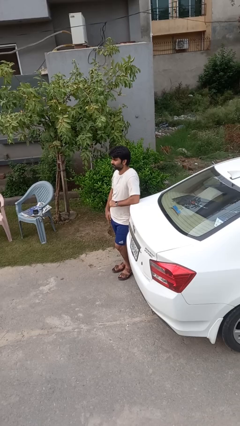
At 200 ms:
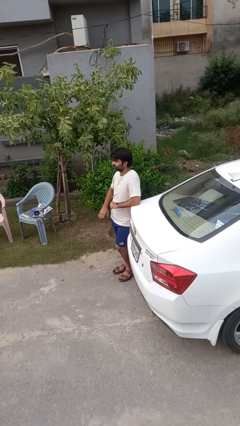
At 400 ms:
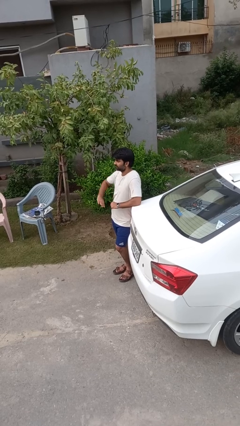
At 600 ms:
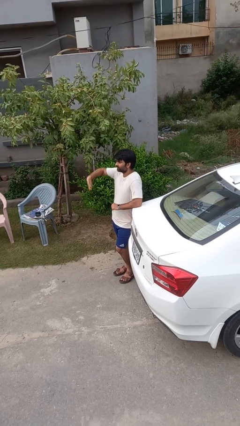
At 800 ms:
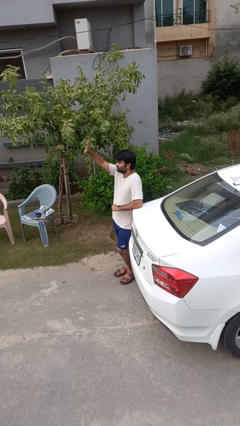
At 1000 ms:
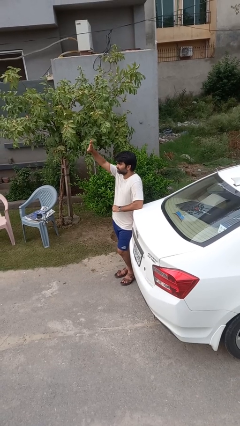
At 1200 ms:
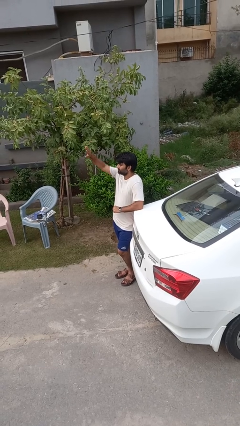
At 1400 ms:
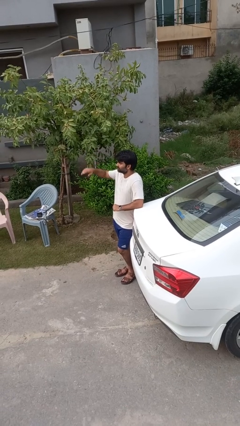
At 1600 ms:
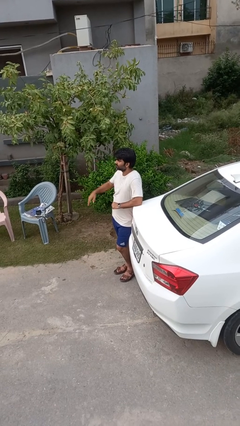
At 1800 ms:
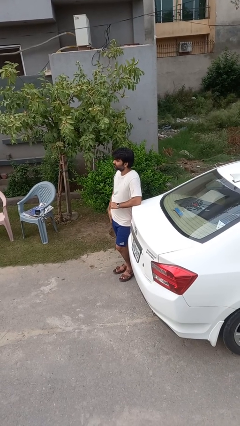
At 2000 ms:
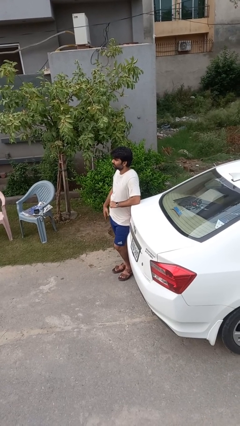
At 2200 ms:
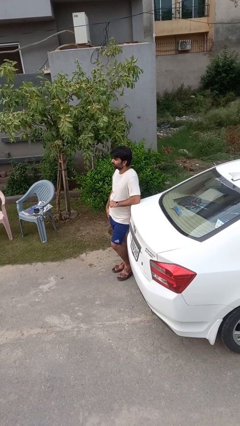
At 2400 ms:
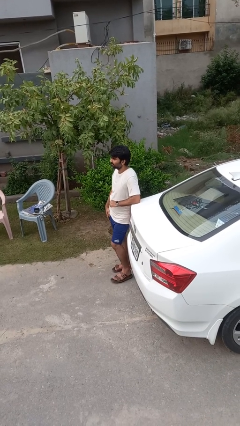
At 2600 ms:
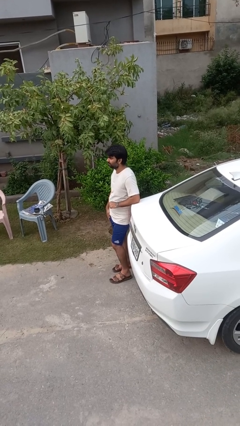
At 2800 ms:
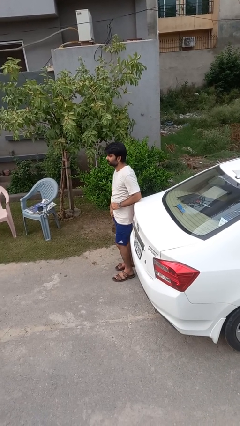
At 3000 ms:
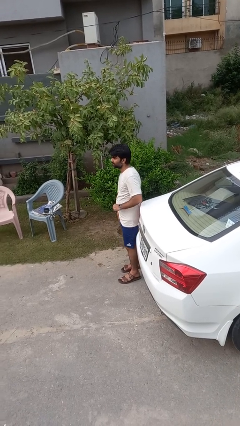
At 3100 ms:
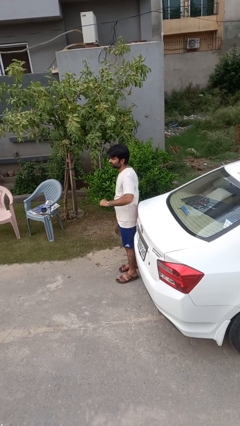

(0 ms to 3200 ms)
person gestures swipe up

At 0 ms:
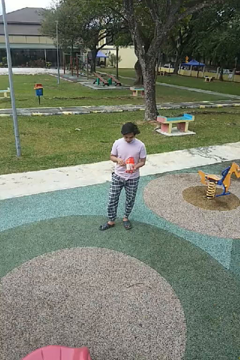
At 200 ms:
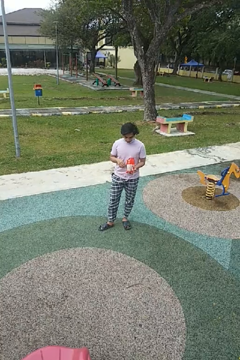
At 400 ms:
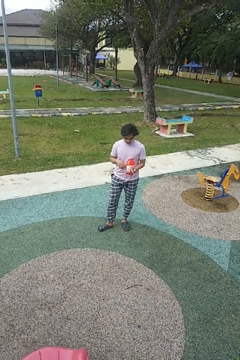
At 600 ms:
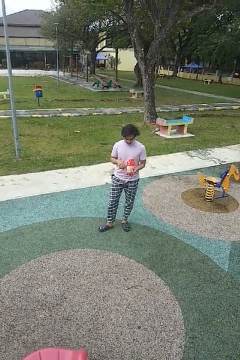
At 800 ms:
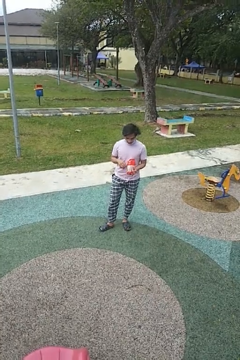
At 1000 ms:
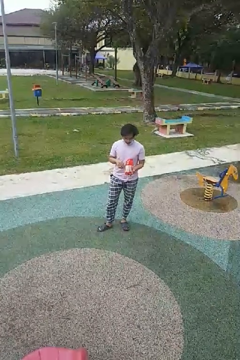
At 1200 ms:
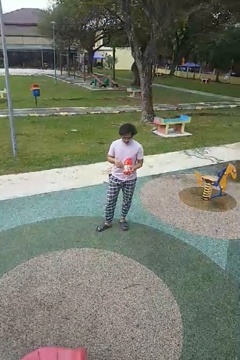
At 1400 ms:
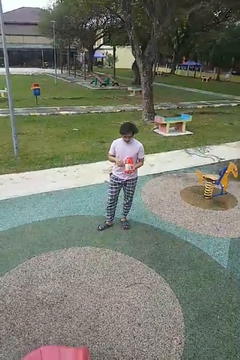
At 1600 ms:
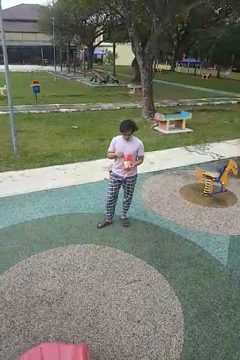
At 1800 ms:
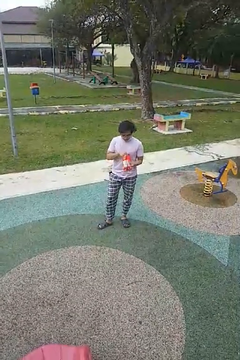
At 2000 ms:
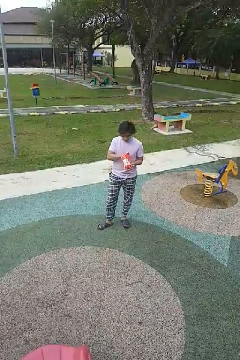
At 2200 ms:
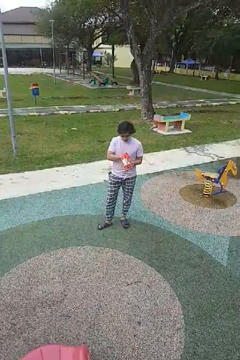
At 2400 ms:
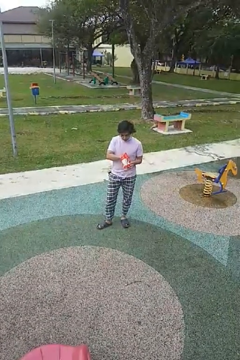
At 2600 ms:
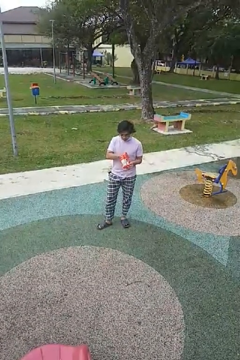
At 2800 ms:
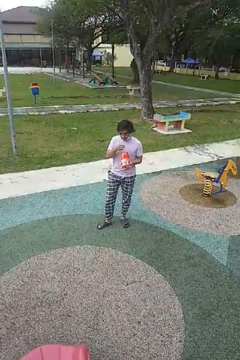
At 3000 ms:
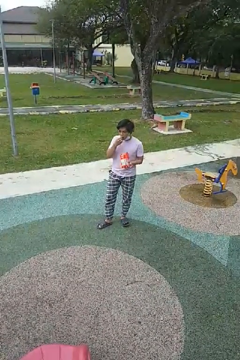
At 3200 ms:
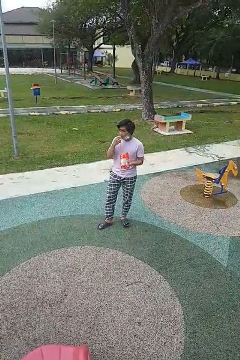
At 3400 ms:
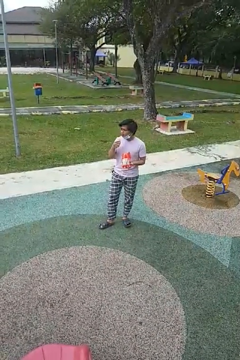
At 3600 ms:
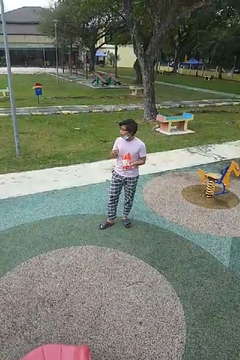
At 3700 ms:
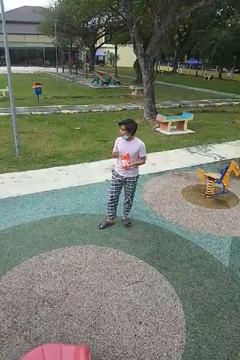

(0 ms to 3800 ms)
person eats snack from bag

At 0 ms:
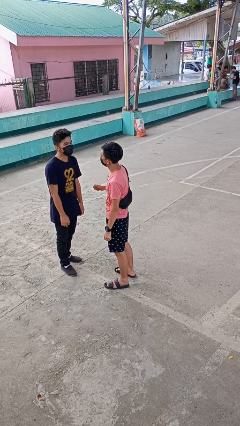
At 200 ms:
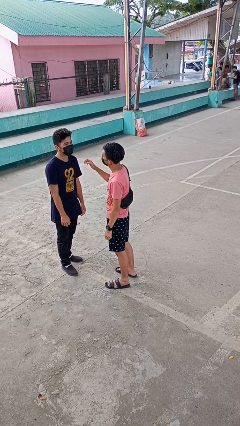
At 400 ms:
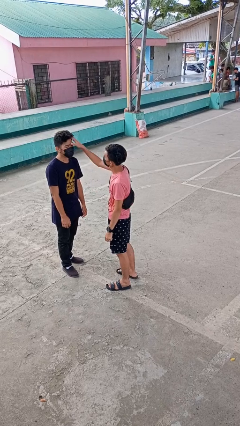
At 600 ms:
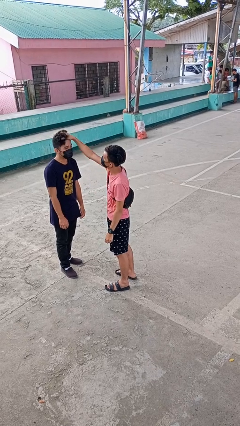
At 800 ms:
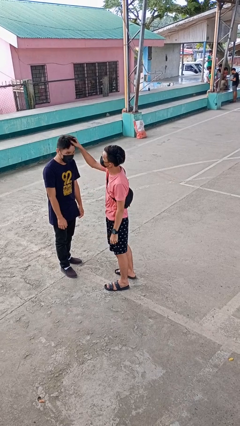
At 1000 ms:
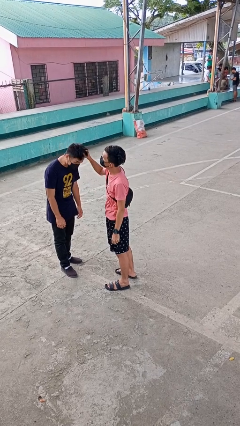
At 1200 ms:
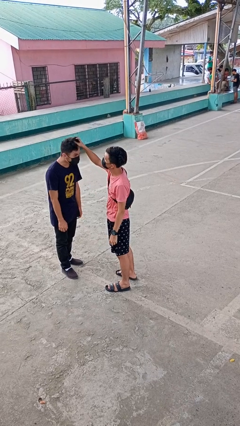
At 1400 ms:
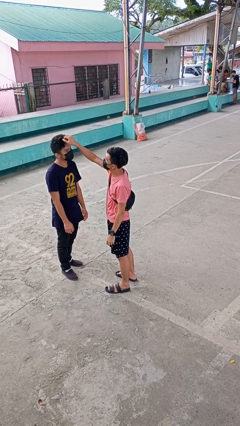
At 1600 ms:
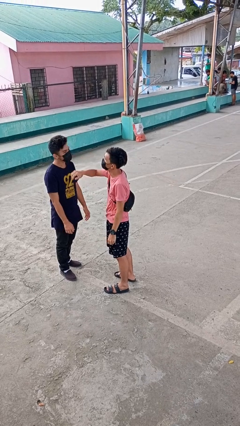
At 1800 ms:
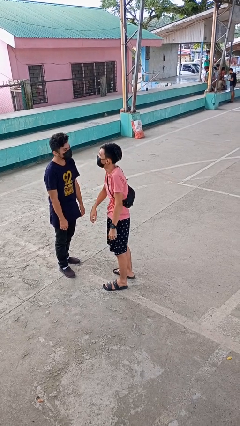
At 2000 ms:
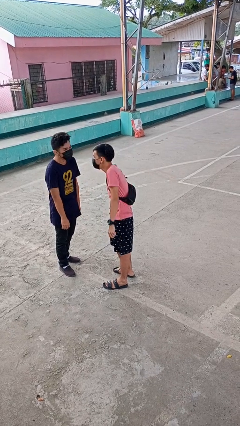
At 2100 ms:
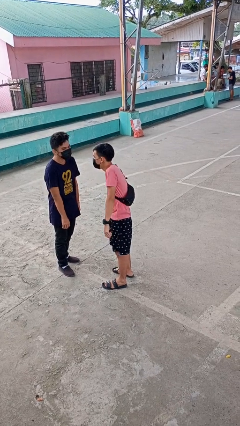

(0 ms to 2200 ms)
person grabs person by hair

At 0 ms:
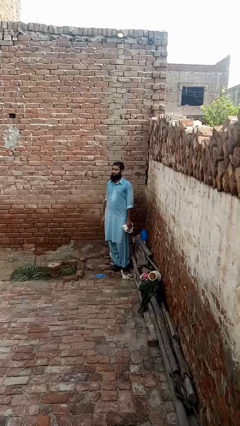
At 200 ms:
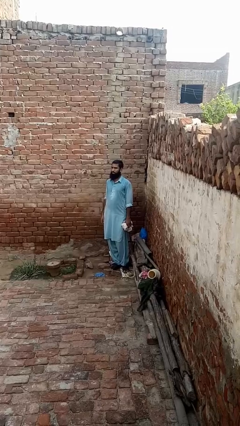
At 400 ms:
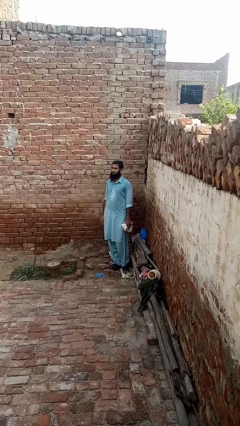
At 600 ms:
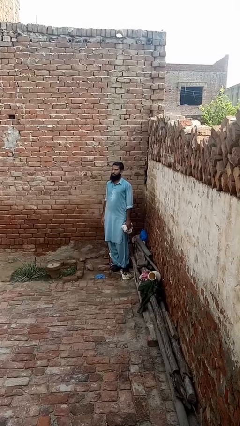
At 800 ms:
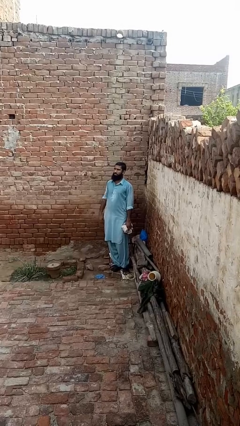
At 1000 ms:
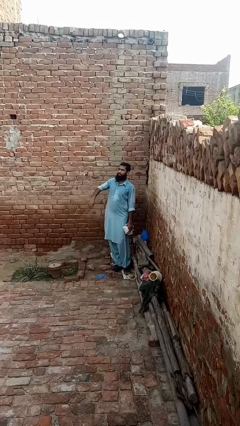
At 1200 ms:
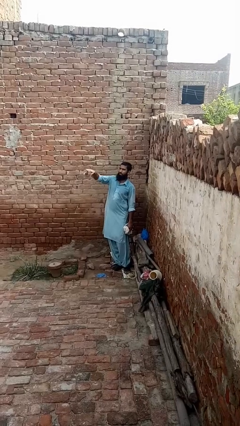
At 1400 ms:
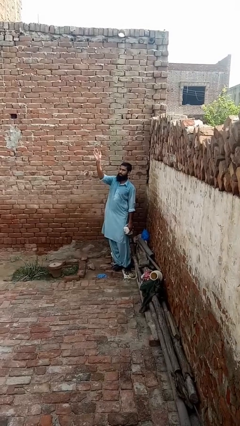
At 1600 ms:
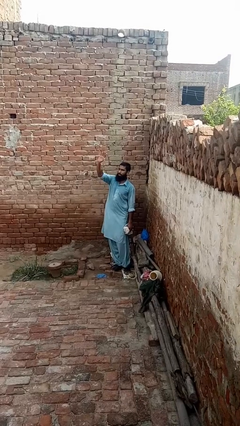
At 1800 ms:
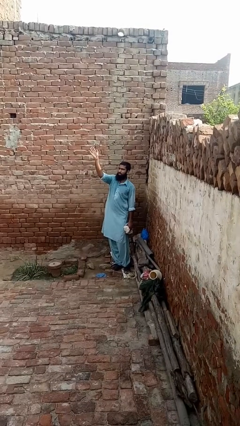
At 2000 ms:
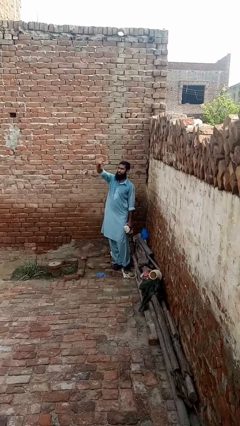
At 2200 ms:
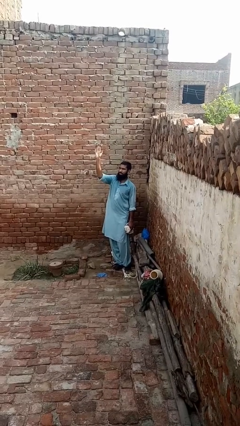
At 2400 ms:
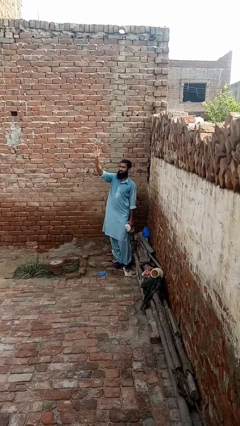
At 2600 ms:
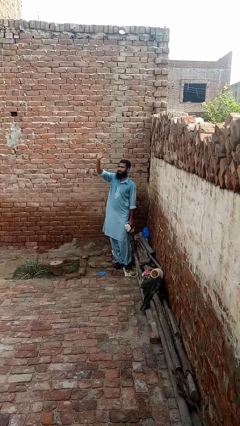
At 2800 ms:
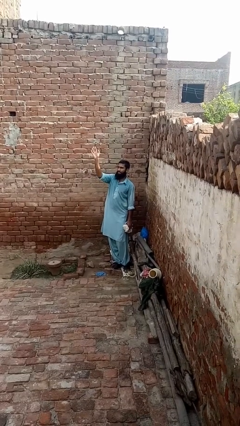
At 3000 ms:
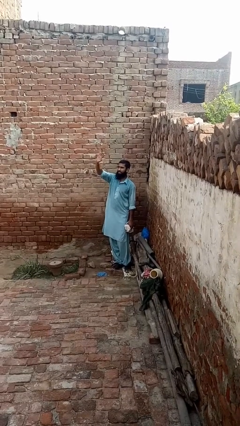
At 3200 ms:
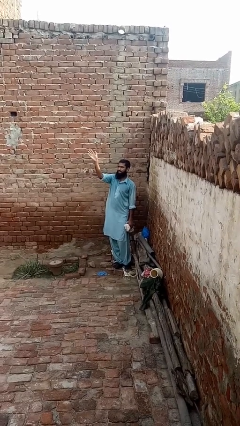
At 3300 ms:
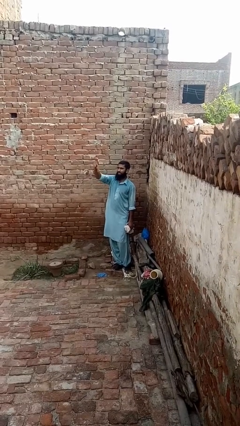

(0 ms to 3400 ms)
person waves at person

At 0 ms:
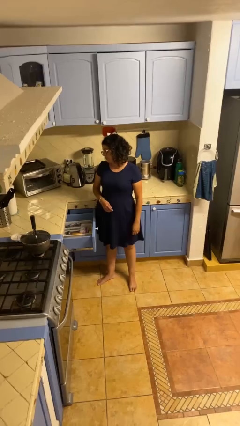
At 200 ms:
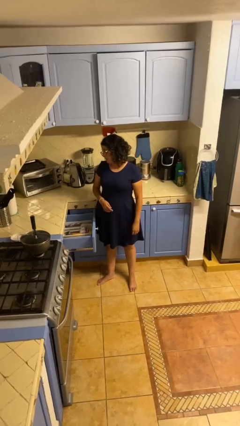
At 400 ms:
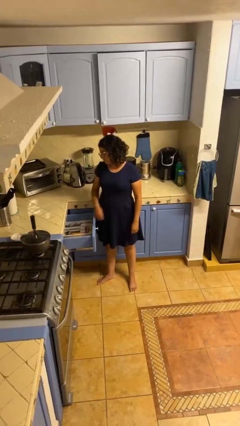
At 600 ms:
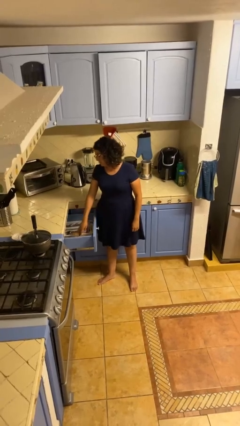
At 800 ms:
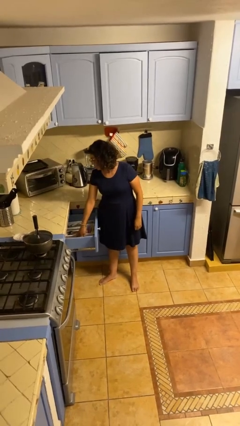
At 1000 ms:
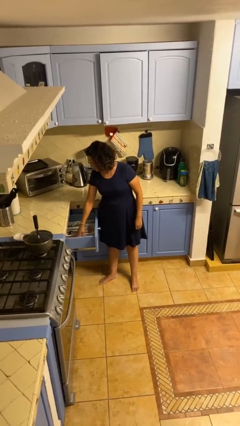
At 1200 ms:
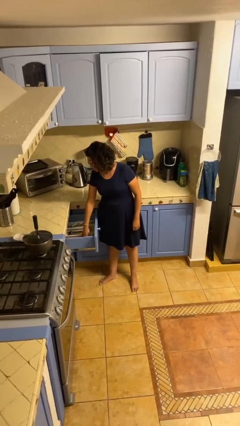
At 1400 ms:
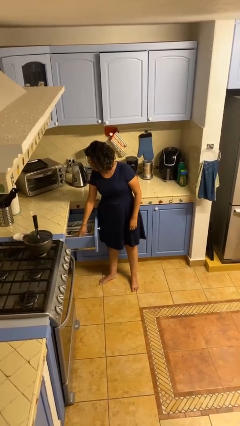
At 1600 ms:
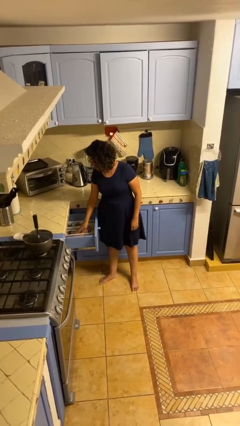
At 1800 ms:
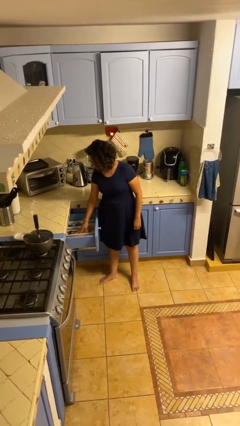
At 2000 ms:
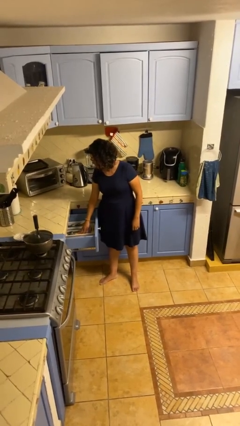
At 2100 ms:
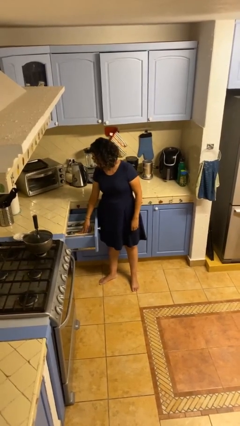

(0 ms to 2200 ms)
person searches in kitchen drawer

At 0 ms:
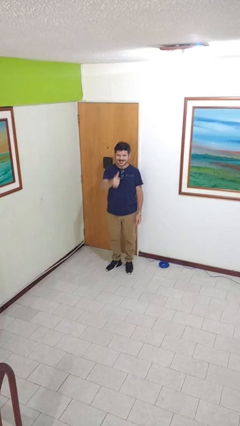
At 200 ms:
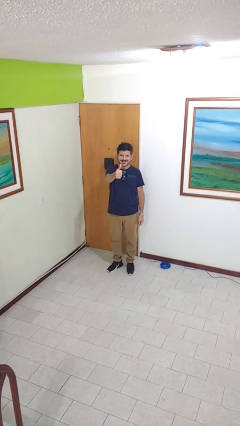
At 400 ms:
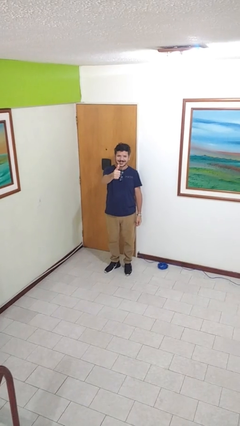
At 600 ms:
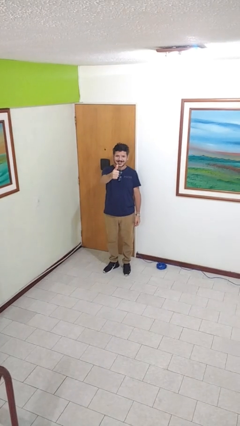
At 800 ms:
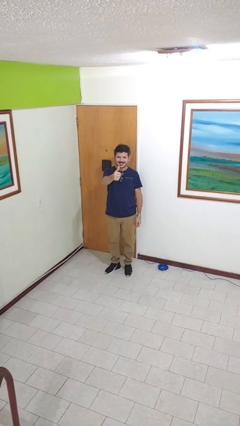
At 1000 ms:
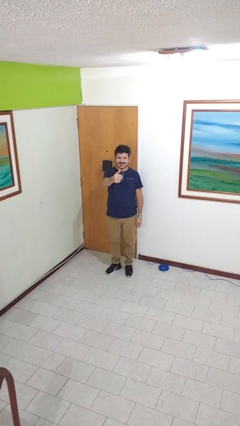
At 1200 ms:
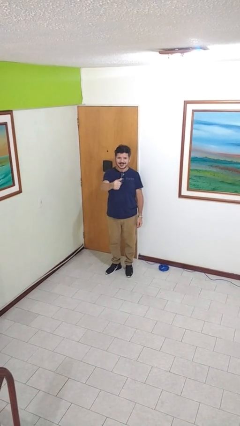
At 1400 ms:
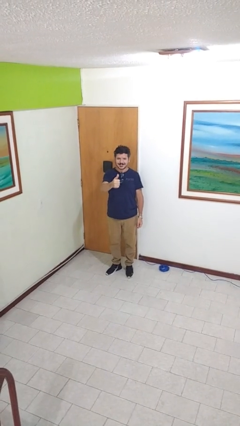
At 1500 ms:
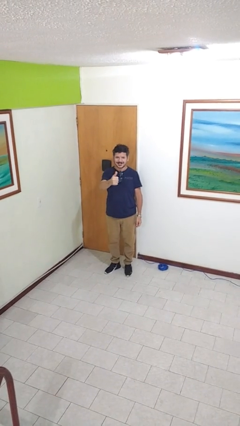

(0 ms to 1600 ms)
person gestures thumbs up

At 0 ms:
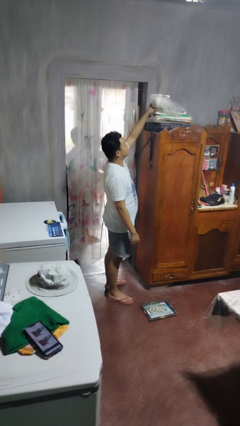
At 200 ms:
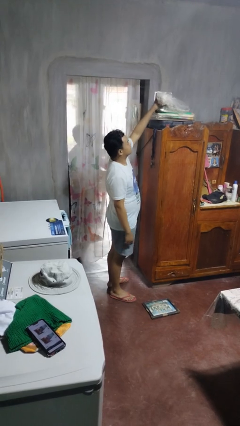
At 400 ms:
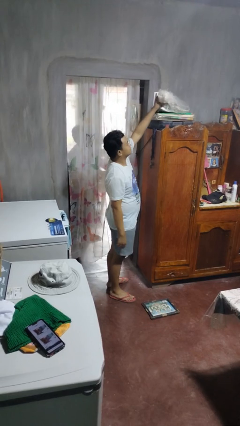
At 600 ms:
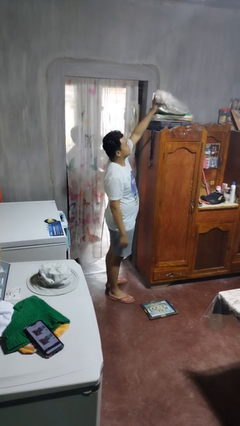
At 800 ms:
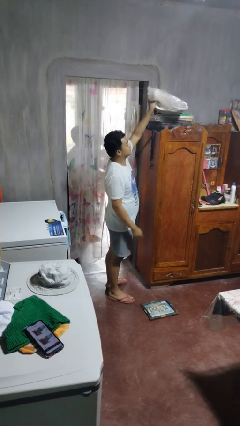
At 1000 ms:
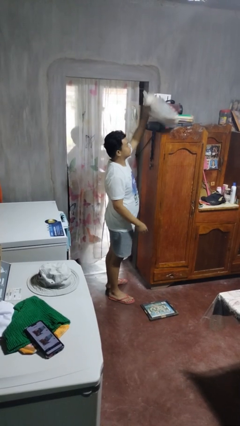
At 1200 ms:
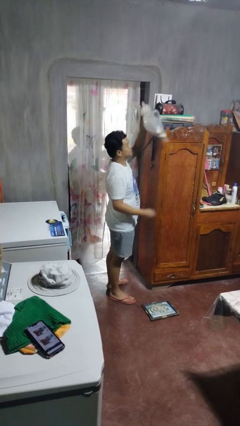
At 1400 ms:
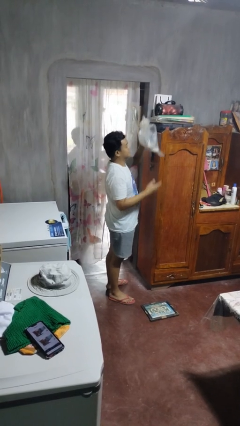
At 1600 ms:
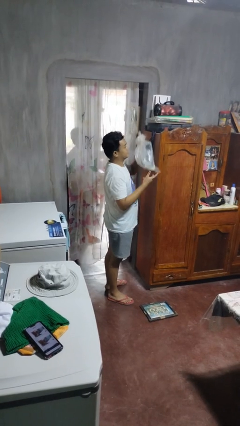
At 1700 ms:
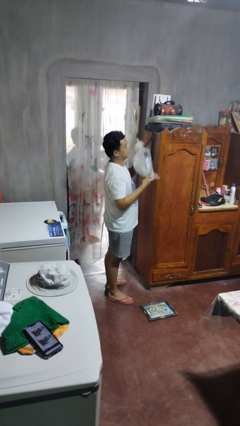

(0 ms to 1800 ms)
person picks up object from shelf
